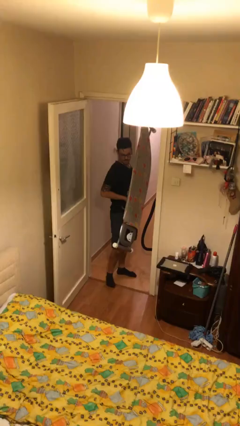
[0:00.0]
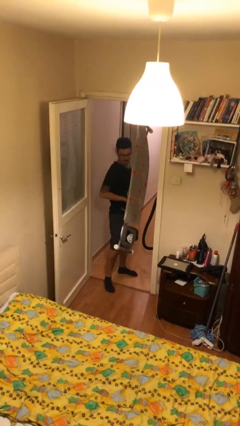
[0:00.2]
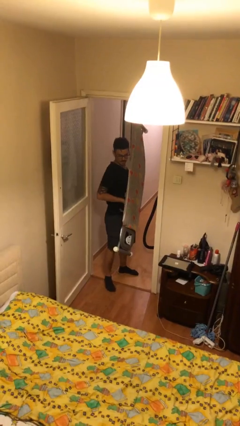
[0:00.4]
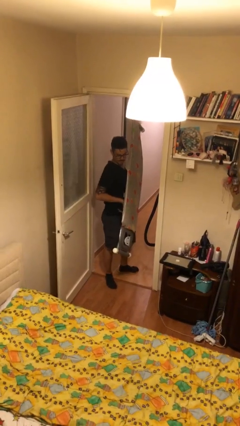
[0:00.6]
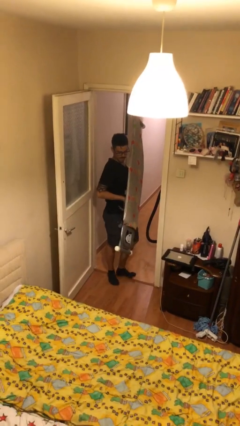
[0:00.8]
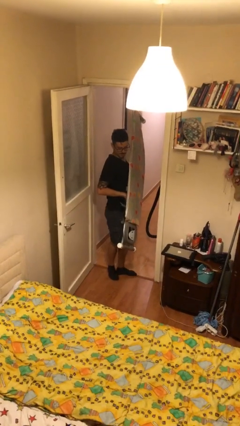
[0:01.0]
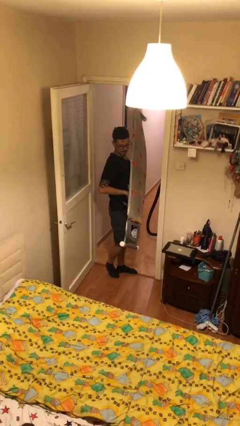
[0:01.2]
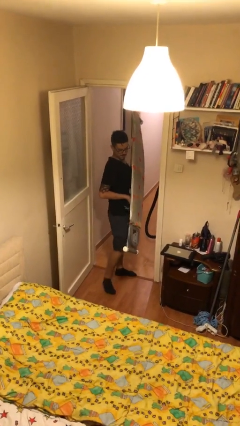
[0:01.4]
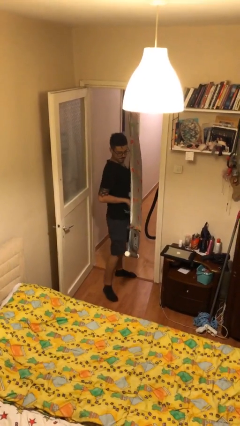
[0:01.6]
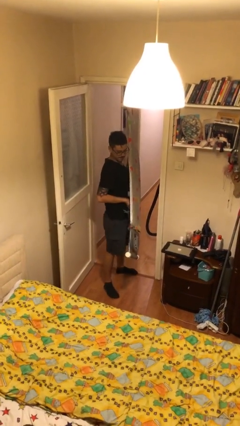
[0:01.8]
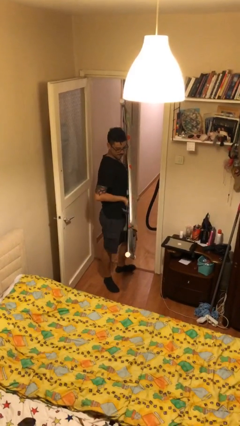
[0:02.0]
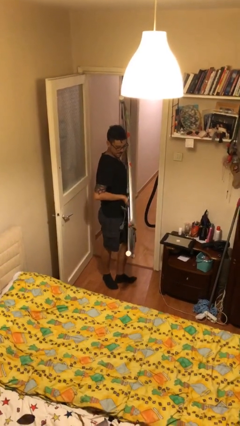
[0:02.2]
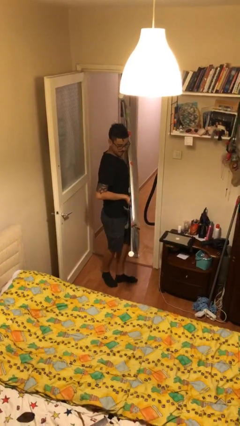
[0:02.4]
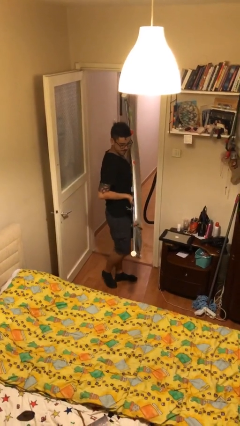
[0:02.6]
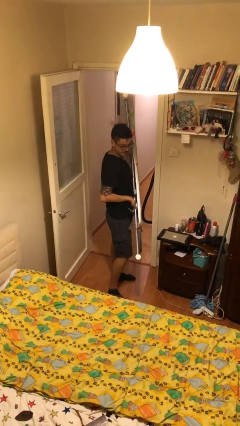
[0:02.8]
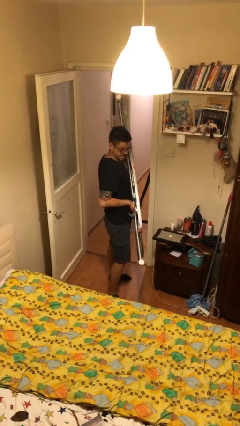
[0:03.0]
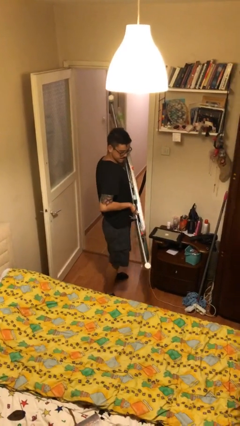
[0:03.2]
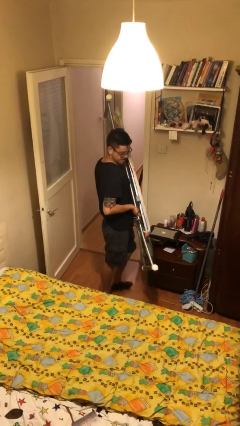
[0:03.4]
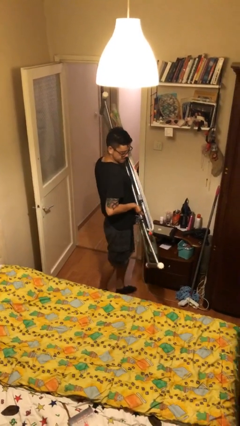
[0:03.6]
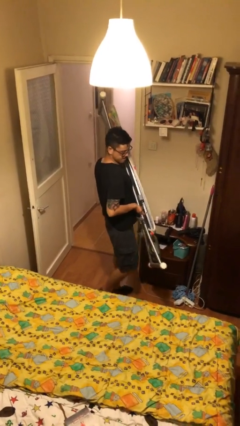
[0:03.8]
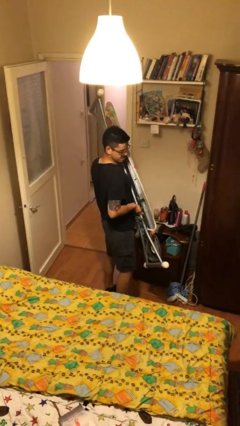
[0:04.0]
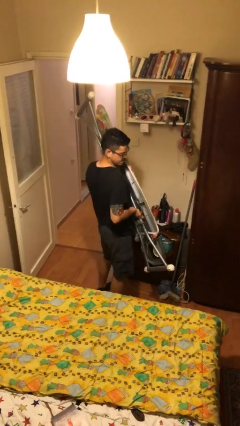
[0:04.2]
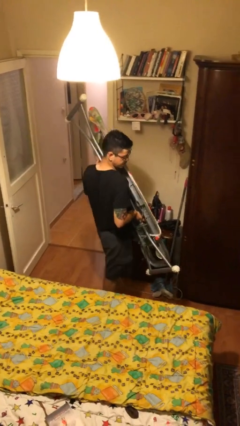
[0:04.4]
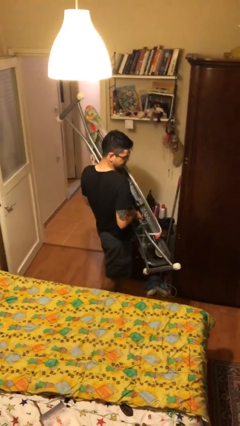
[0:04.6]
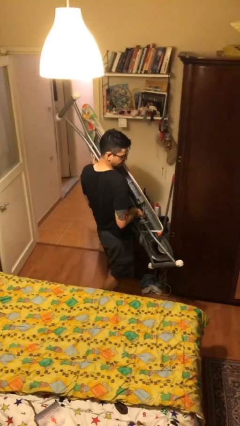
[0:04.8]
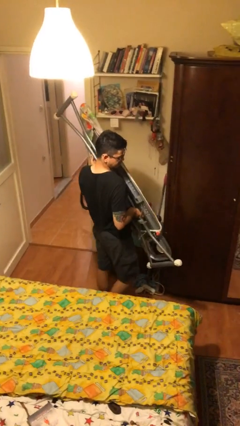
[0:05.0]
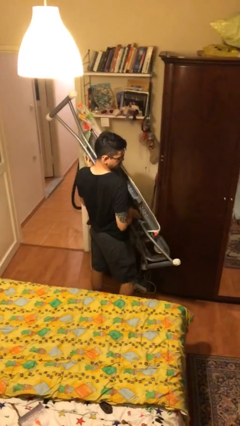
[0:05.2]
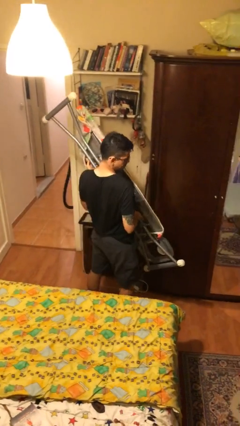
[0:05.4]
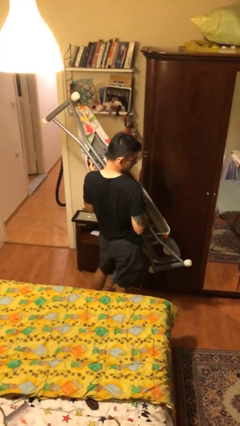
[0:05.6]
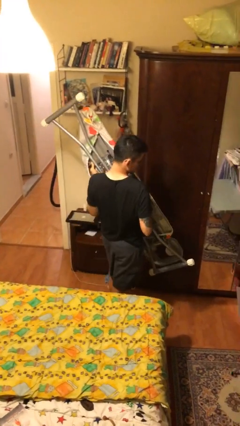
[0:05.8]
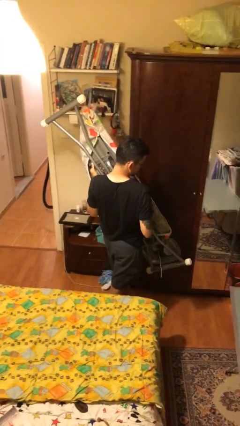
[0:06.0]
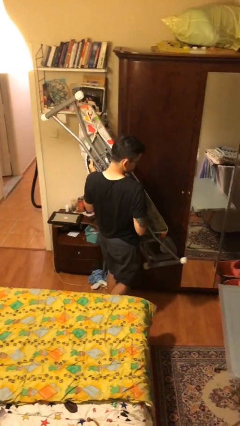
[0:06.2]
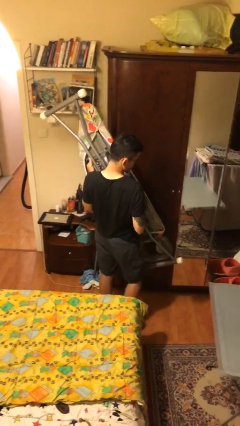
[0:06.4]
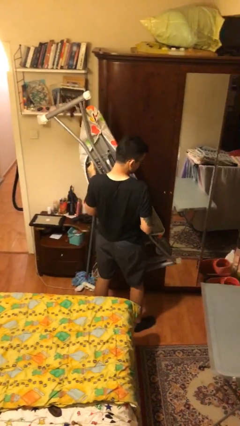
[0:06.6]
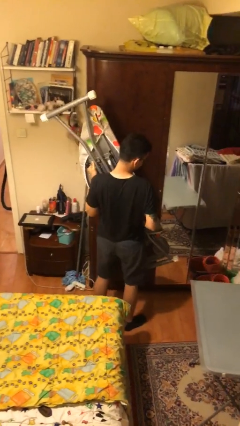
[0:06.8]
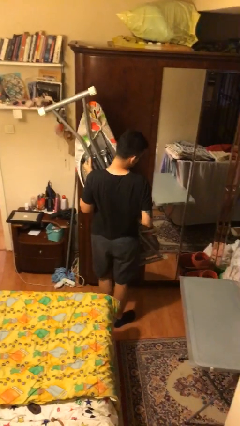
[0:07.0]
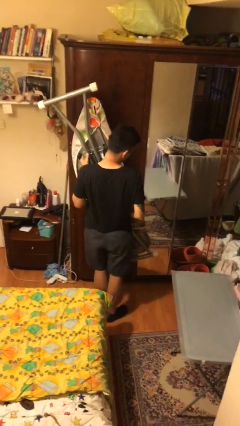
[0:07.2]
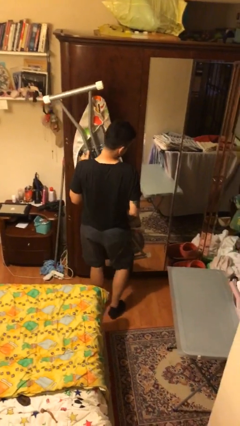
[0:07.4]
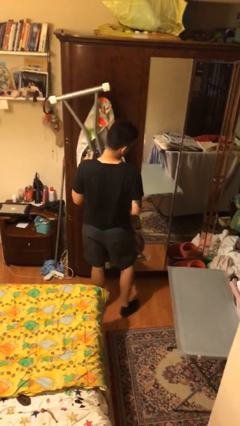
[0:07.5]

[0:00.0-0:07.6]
person carries heavy object

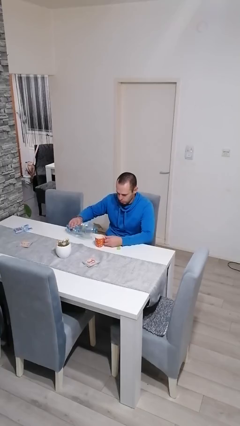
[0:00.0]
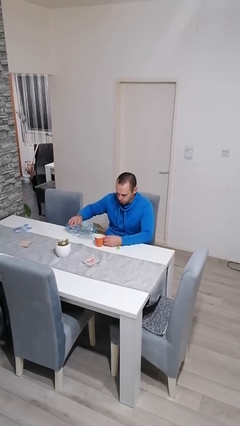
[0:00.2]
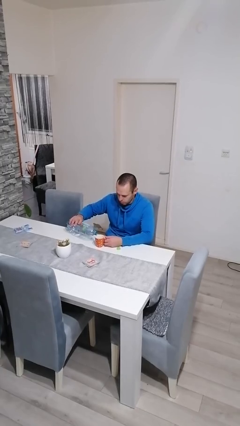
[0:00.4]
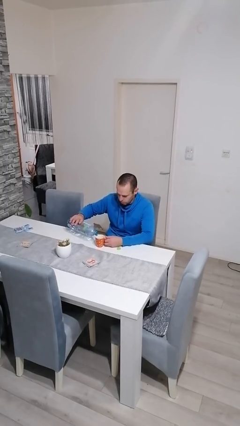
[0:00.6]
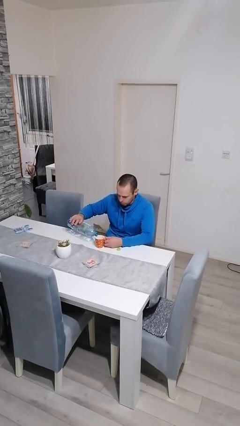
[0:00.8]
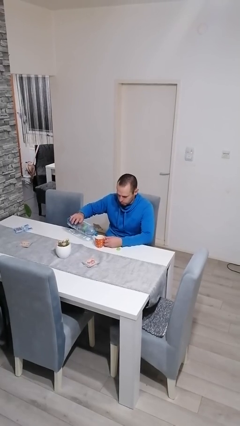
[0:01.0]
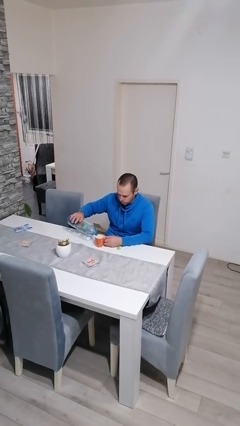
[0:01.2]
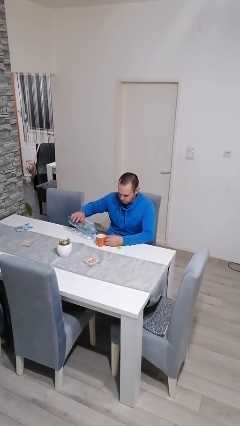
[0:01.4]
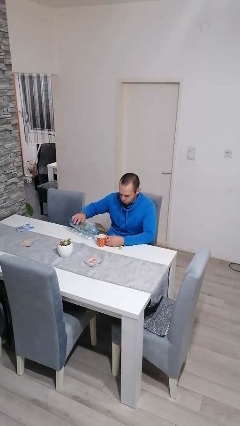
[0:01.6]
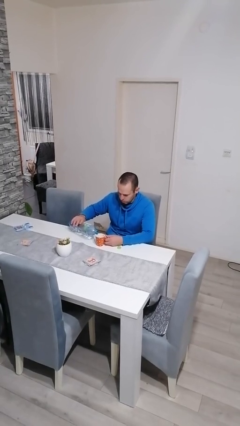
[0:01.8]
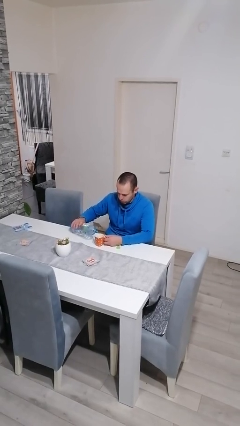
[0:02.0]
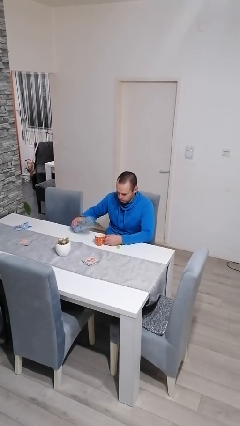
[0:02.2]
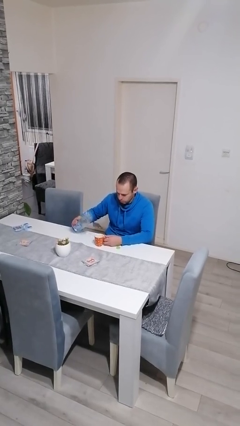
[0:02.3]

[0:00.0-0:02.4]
person pours liquid into cup

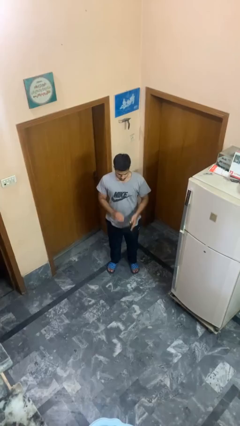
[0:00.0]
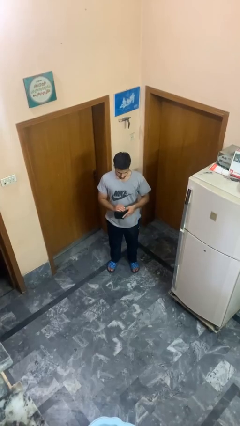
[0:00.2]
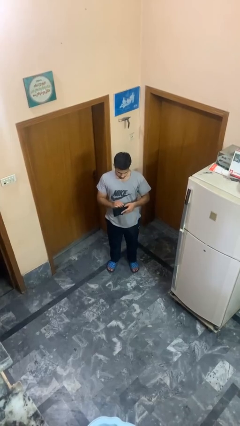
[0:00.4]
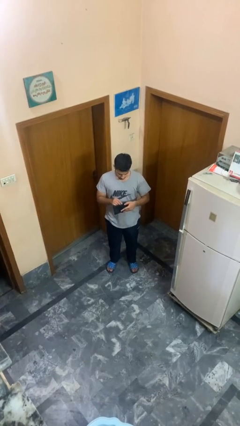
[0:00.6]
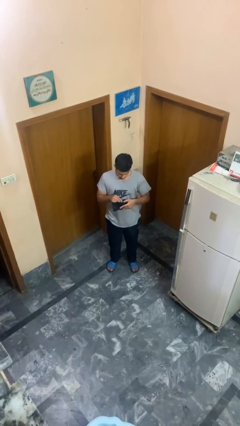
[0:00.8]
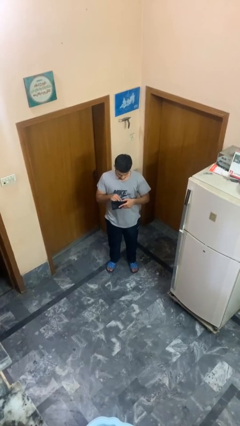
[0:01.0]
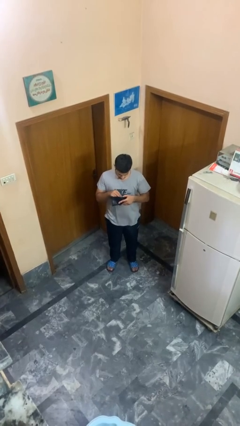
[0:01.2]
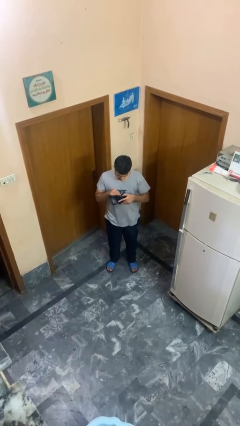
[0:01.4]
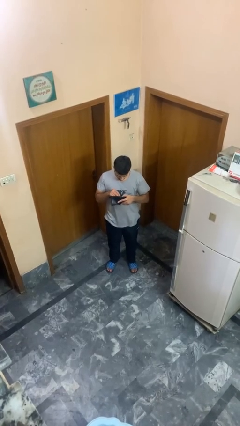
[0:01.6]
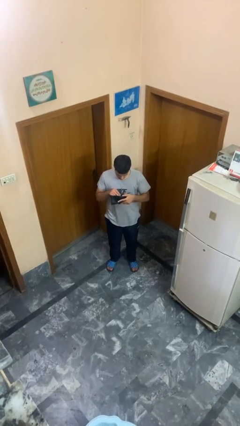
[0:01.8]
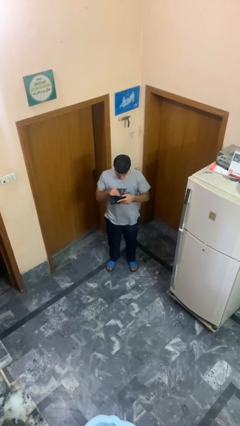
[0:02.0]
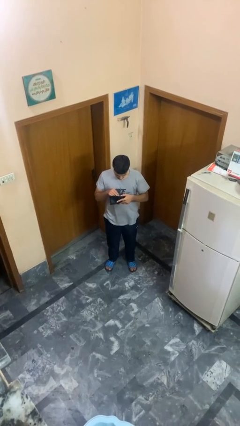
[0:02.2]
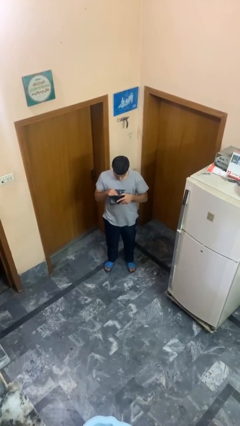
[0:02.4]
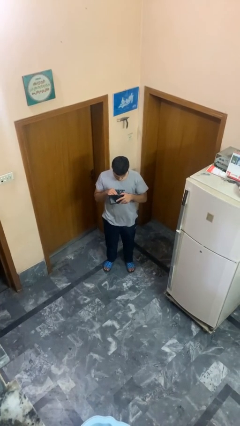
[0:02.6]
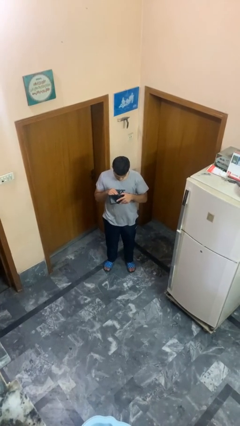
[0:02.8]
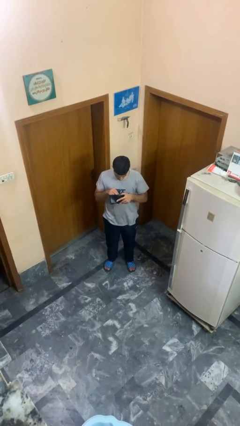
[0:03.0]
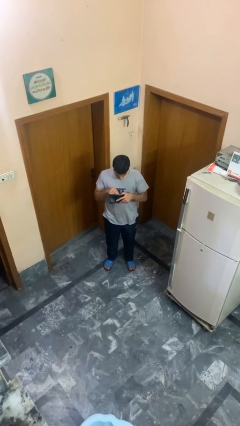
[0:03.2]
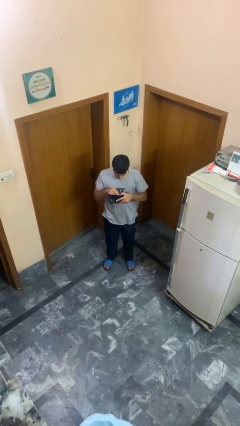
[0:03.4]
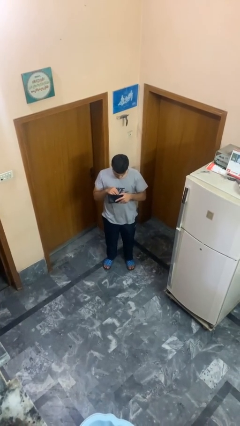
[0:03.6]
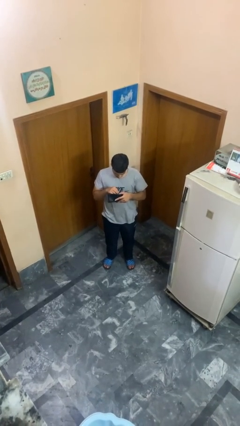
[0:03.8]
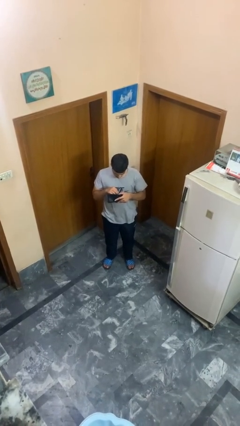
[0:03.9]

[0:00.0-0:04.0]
person searches in purse

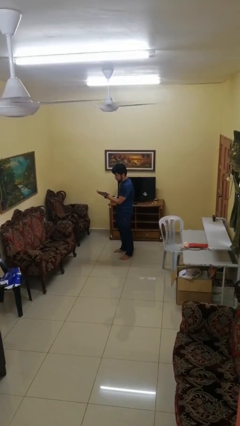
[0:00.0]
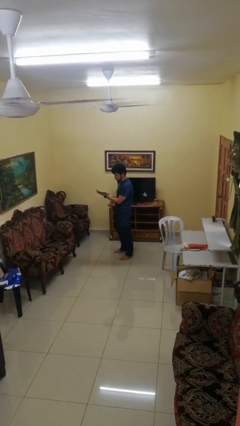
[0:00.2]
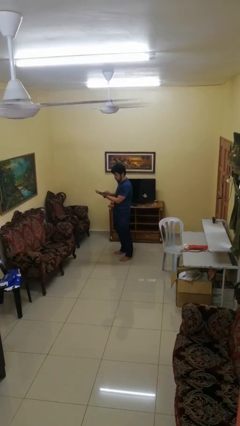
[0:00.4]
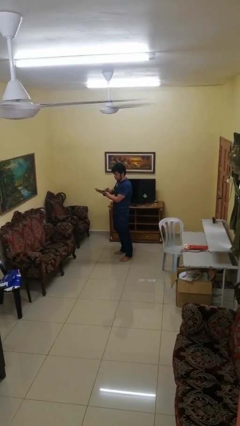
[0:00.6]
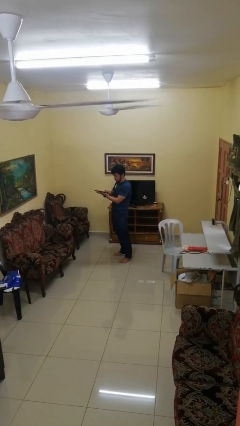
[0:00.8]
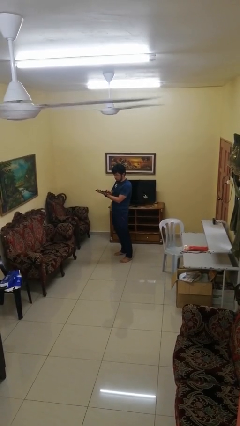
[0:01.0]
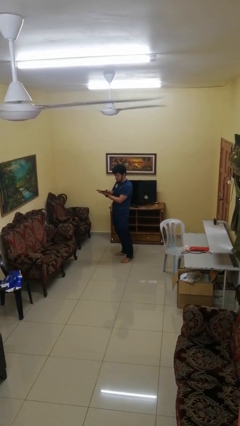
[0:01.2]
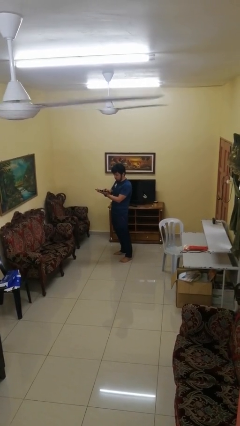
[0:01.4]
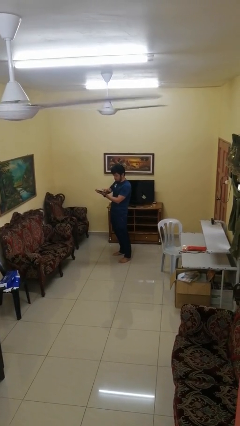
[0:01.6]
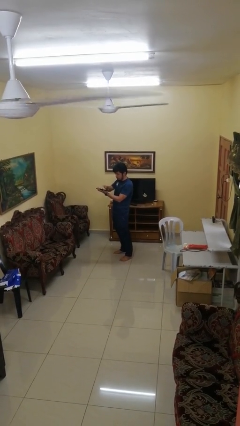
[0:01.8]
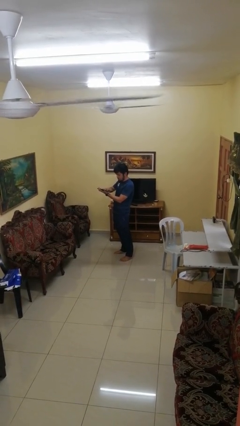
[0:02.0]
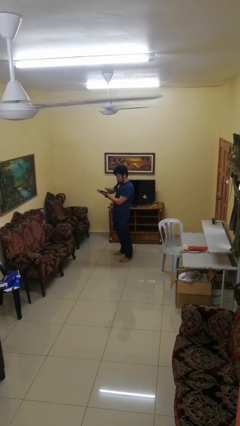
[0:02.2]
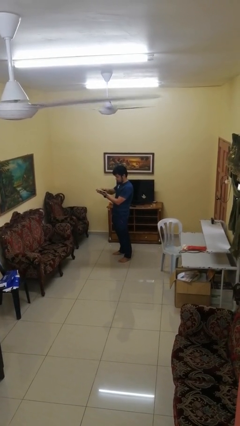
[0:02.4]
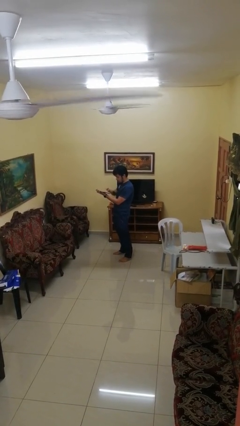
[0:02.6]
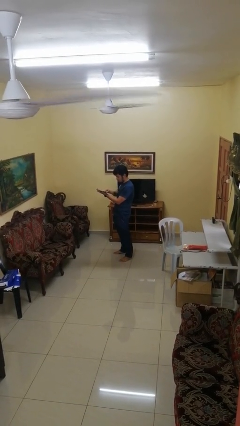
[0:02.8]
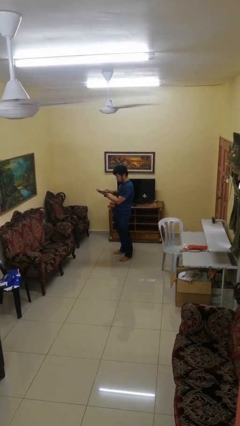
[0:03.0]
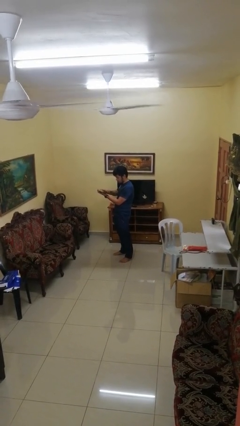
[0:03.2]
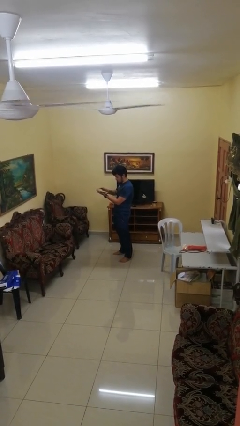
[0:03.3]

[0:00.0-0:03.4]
person interacts with tablet

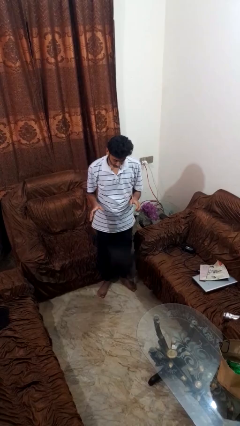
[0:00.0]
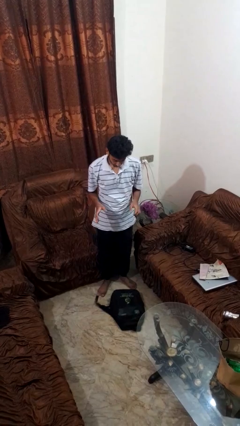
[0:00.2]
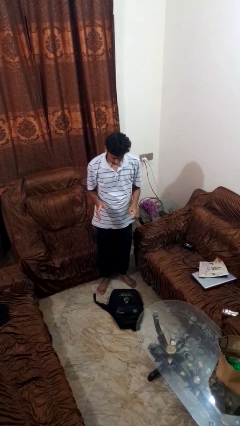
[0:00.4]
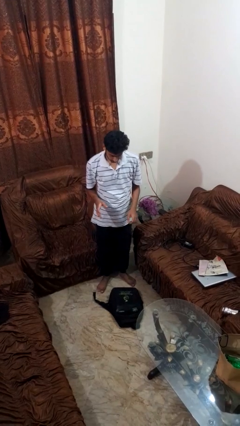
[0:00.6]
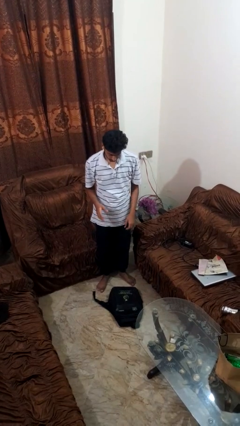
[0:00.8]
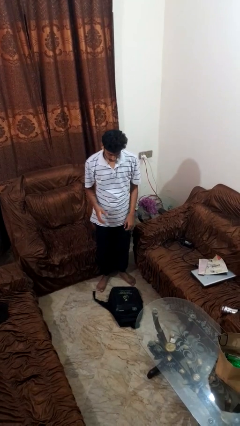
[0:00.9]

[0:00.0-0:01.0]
person drops object
